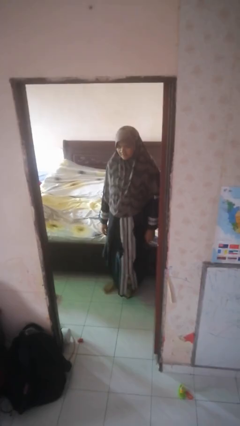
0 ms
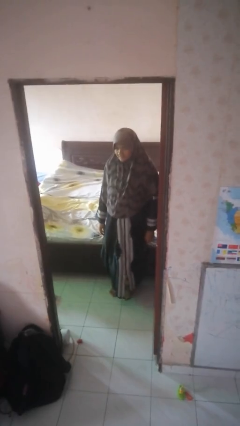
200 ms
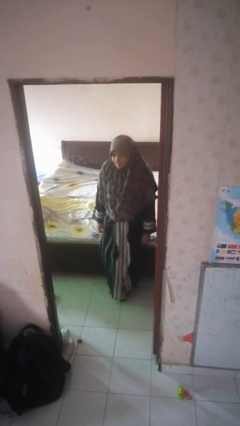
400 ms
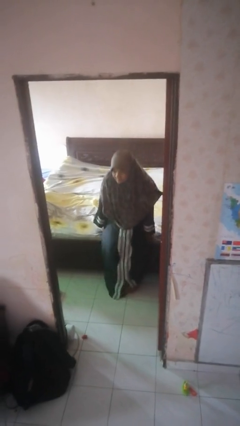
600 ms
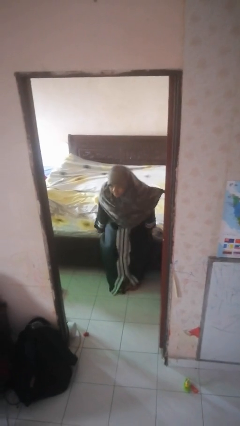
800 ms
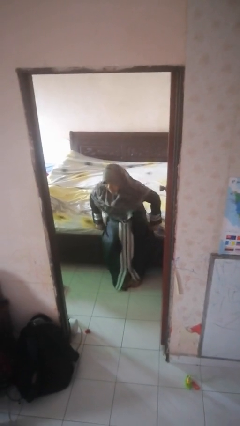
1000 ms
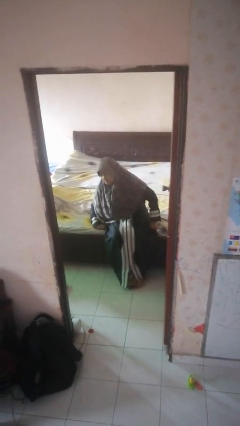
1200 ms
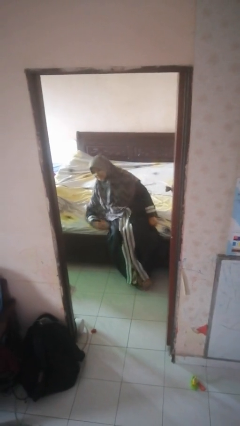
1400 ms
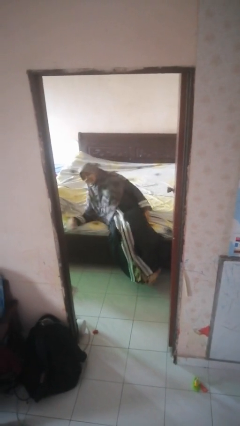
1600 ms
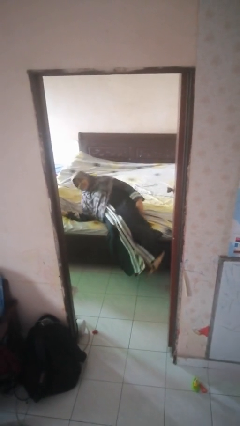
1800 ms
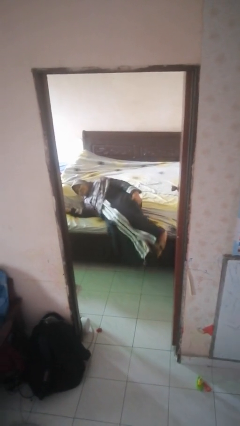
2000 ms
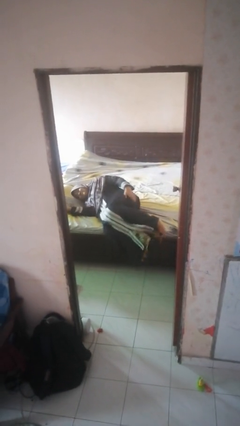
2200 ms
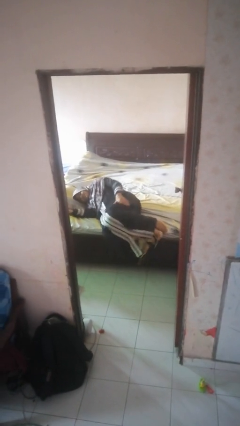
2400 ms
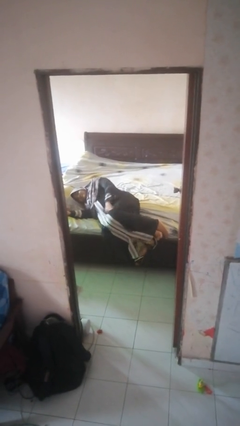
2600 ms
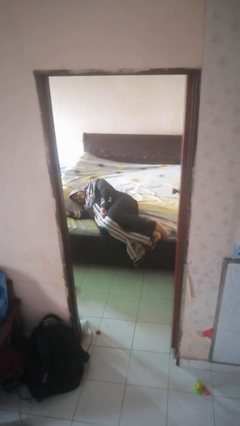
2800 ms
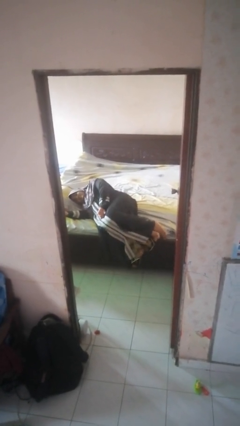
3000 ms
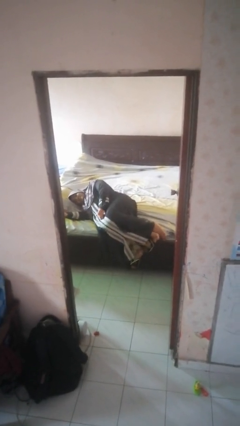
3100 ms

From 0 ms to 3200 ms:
person lies down on bed

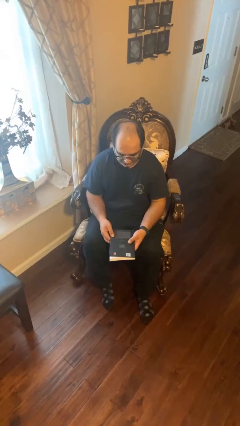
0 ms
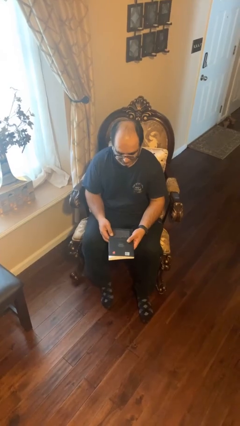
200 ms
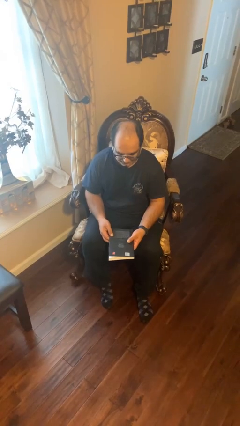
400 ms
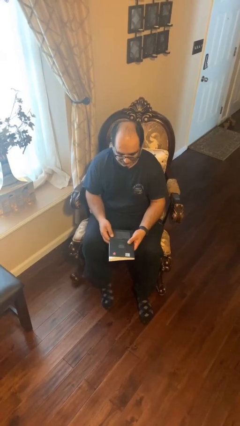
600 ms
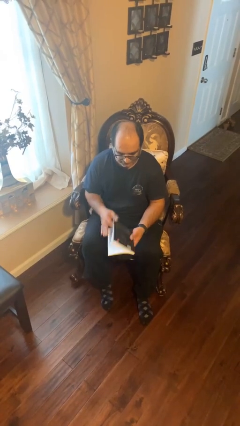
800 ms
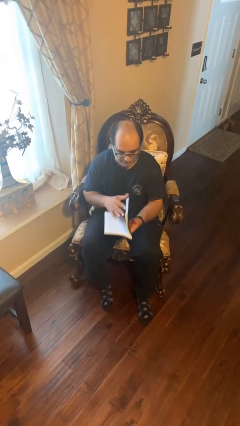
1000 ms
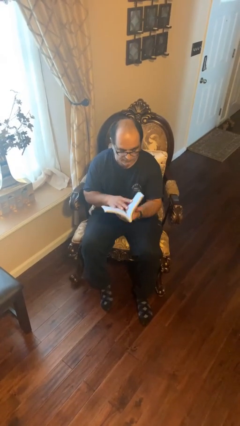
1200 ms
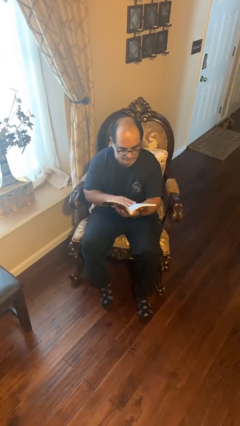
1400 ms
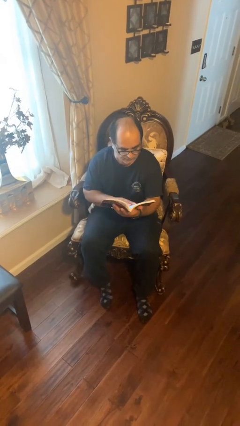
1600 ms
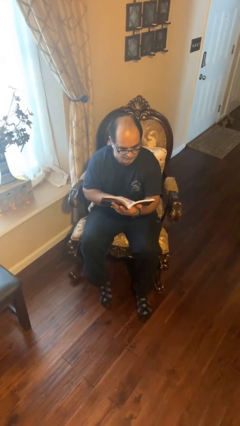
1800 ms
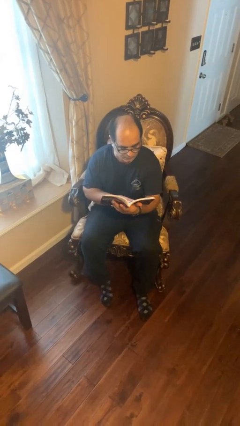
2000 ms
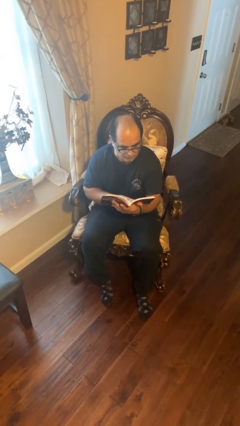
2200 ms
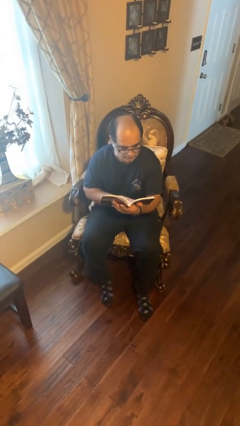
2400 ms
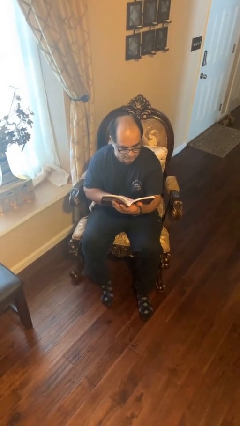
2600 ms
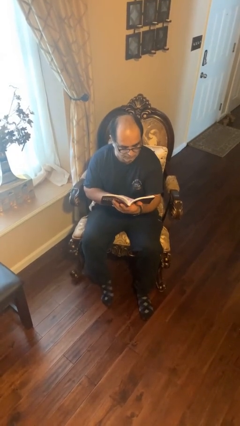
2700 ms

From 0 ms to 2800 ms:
person reads document

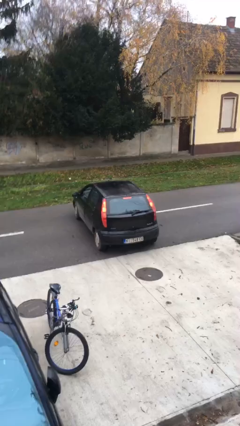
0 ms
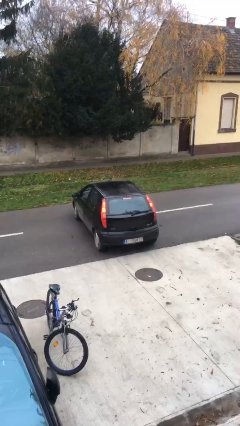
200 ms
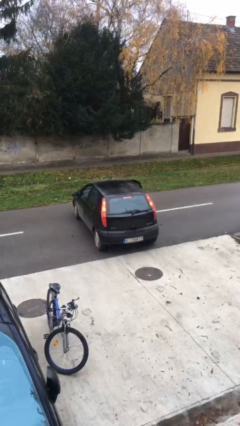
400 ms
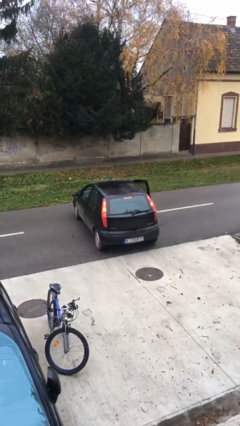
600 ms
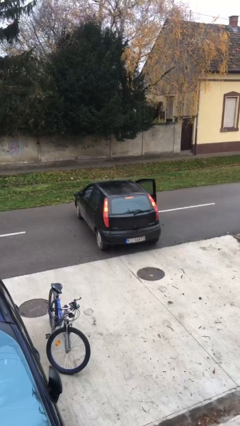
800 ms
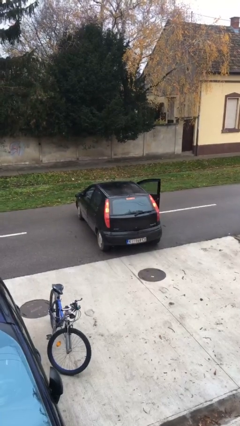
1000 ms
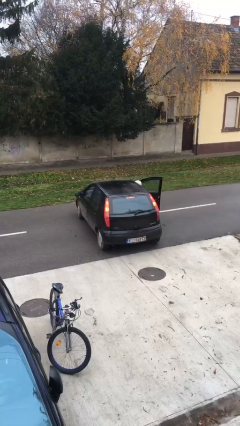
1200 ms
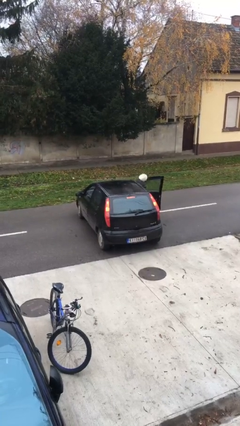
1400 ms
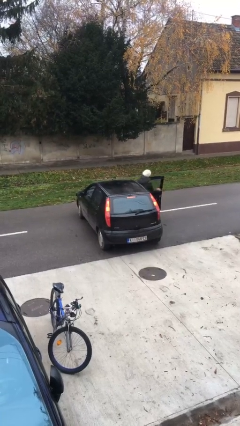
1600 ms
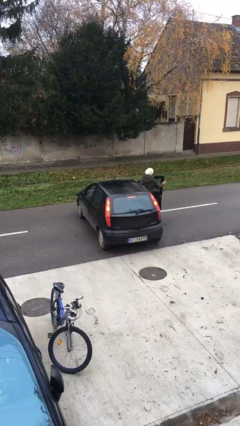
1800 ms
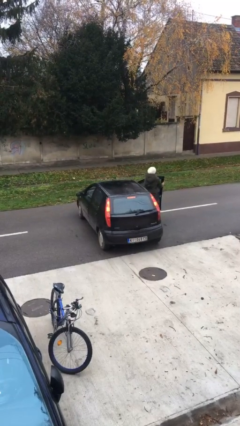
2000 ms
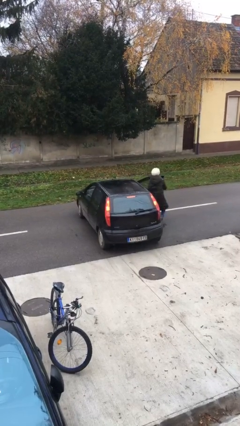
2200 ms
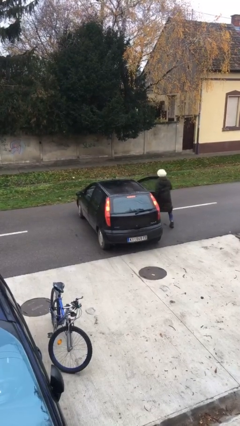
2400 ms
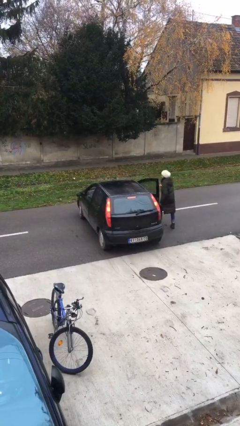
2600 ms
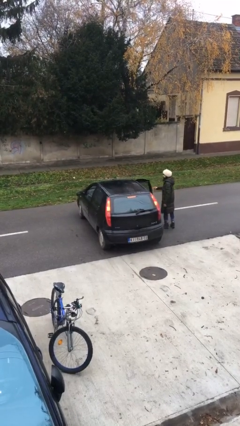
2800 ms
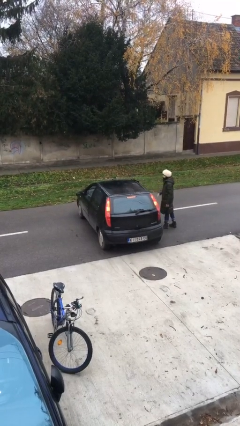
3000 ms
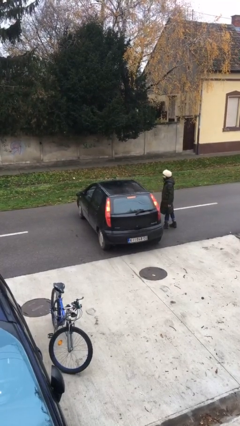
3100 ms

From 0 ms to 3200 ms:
car drops off person

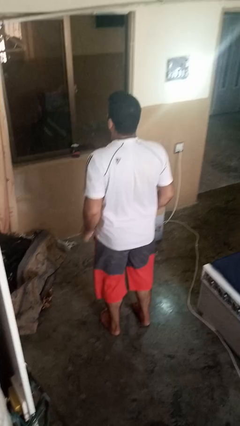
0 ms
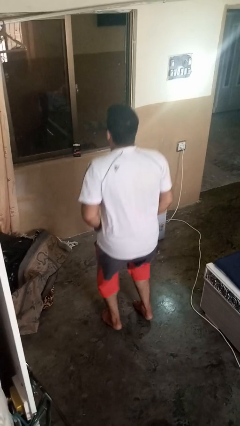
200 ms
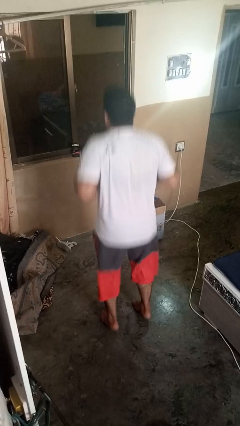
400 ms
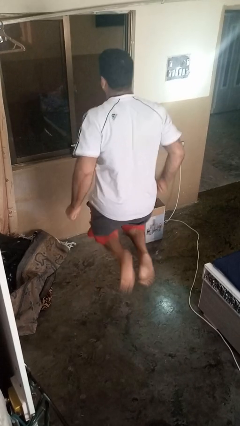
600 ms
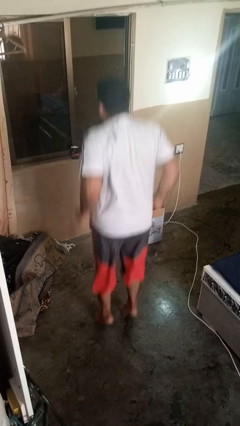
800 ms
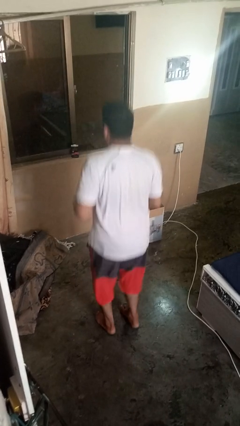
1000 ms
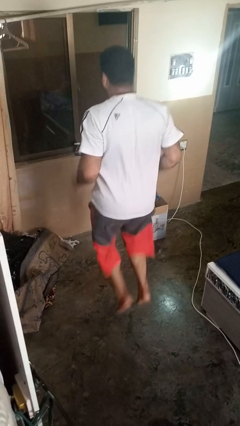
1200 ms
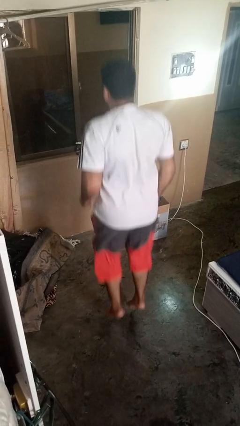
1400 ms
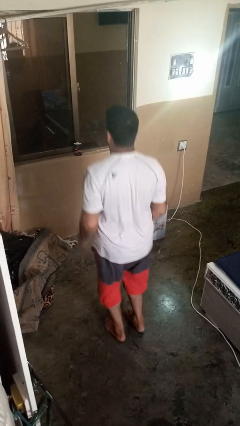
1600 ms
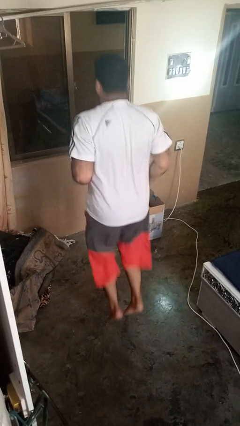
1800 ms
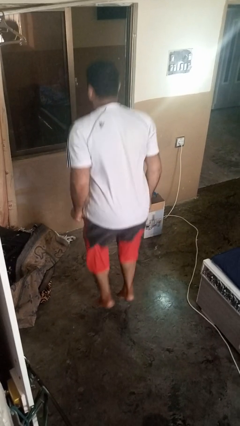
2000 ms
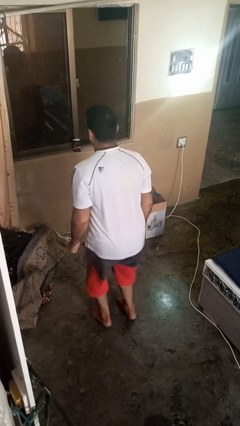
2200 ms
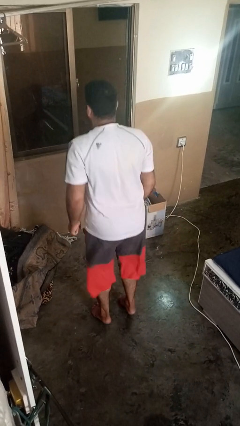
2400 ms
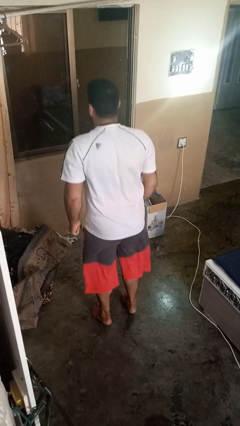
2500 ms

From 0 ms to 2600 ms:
person jumps

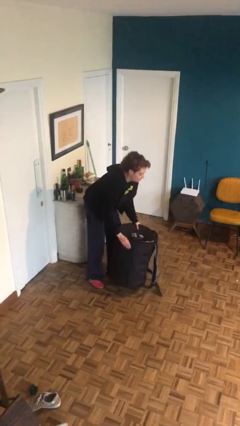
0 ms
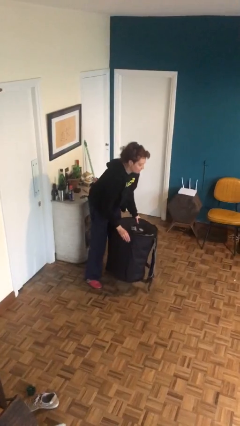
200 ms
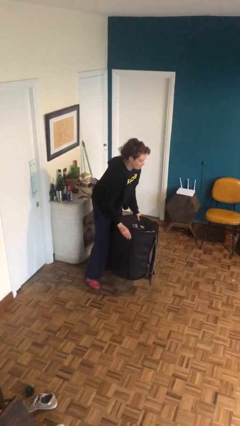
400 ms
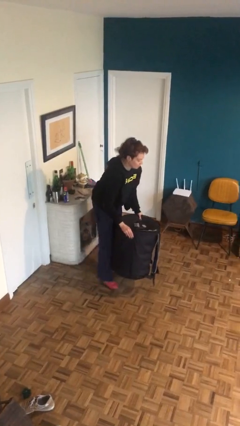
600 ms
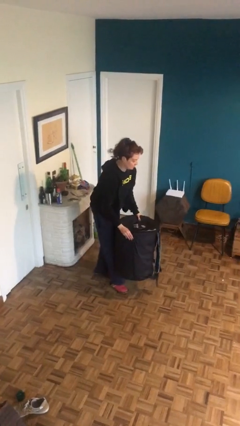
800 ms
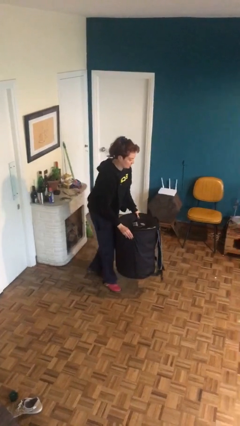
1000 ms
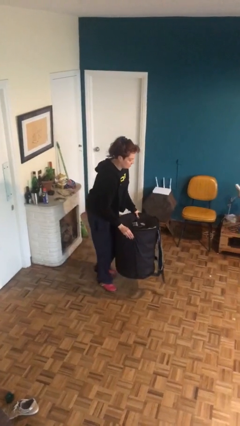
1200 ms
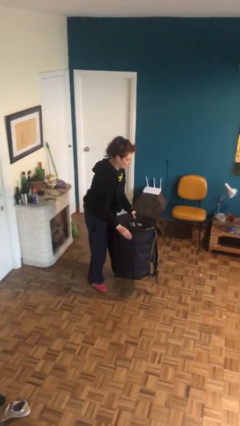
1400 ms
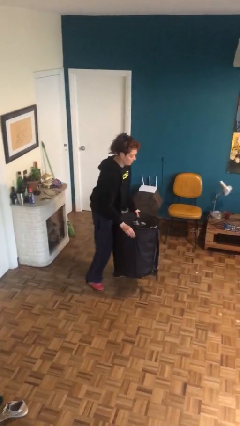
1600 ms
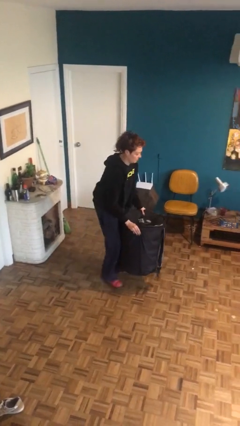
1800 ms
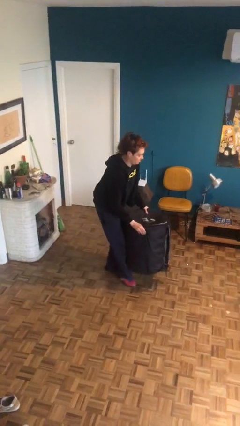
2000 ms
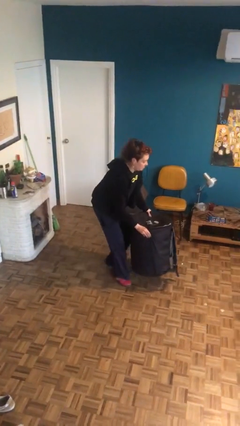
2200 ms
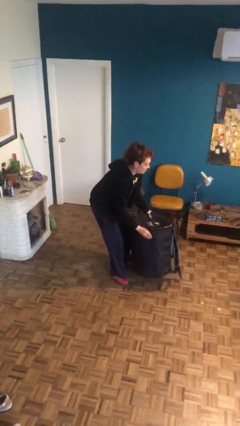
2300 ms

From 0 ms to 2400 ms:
person carries heavy object

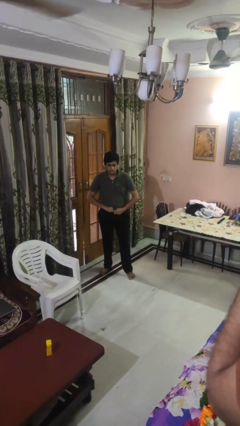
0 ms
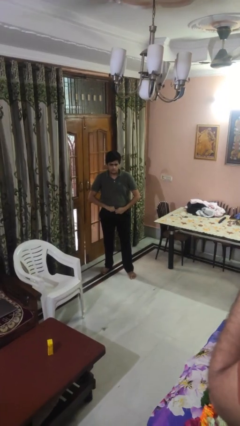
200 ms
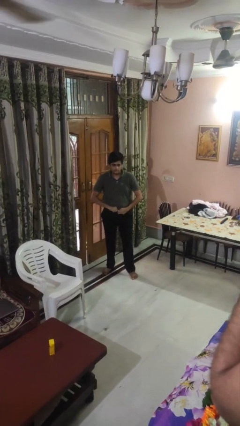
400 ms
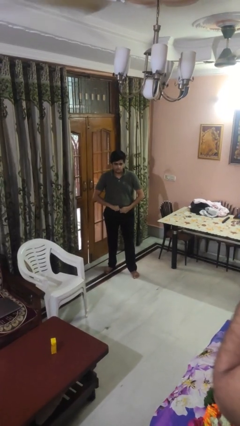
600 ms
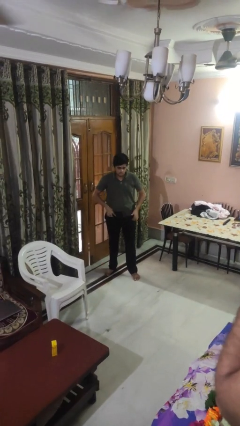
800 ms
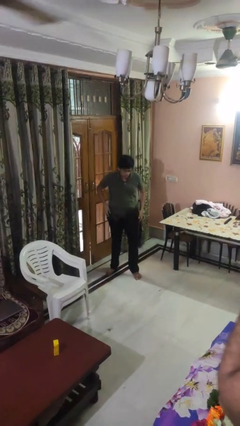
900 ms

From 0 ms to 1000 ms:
person puts on pants

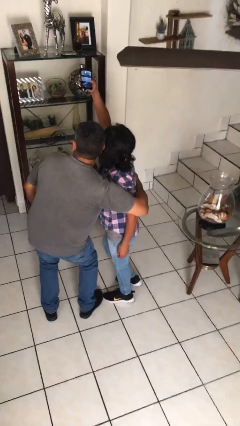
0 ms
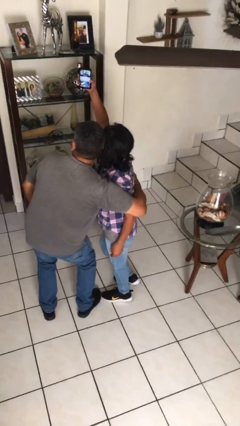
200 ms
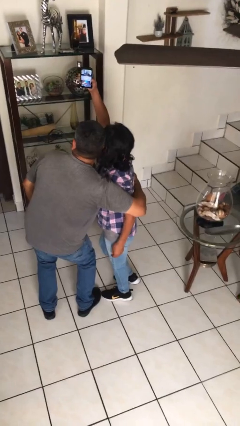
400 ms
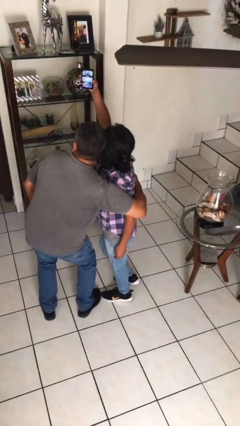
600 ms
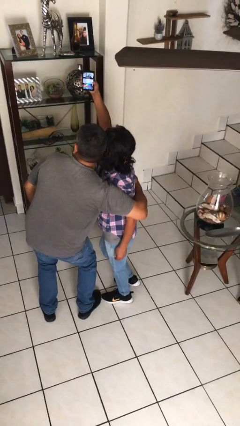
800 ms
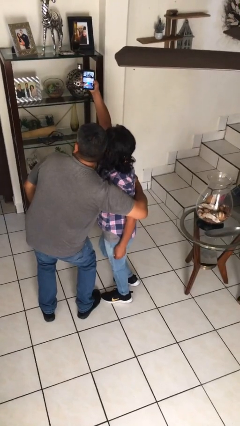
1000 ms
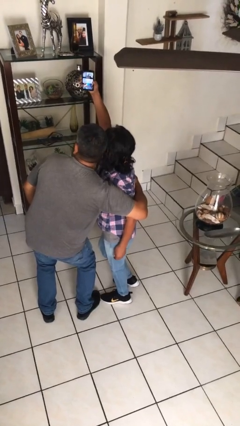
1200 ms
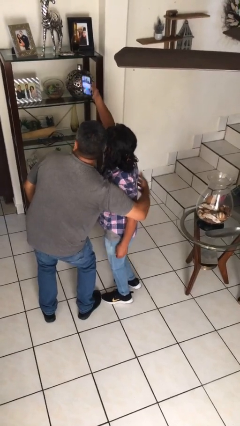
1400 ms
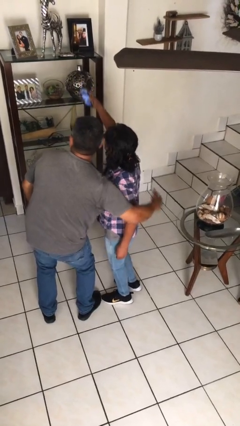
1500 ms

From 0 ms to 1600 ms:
person takes selfie with person

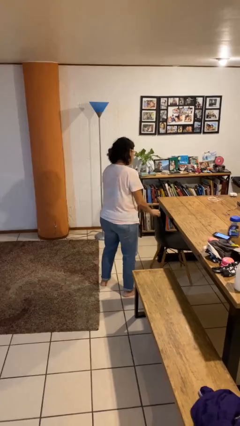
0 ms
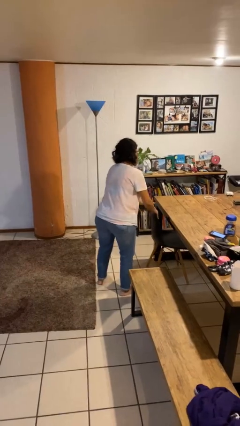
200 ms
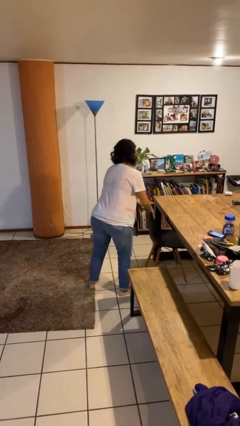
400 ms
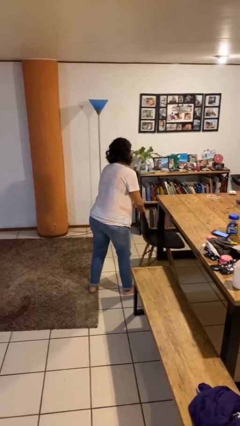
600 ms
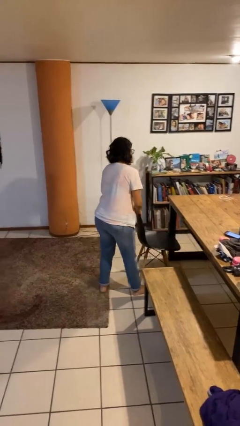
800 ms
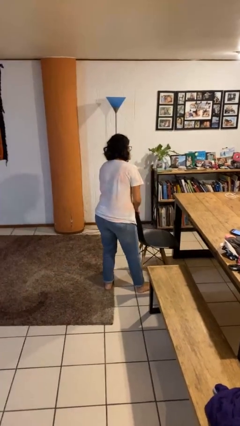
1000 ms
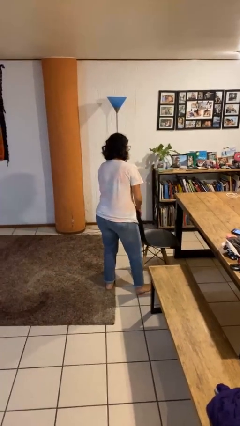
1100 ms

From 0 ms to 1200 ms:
person pulls out chair
